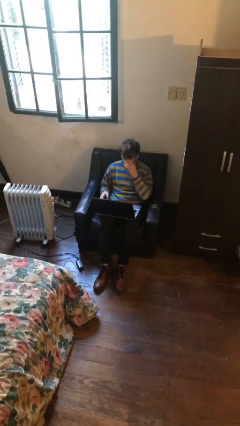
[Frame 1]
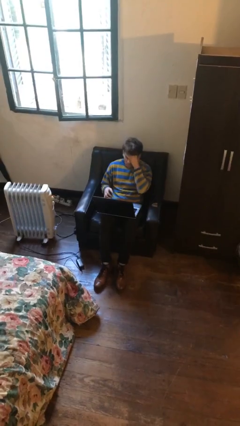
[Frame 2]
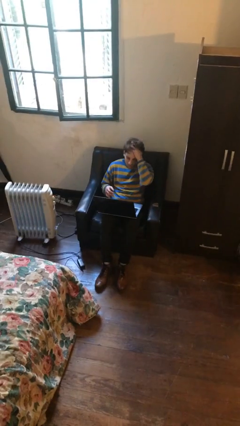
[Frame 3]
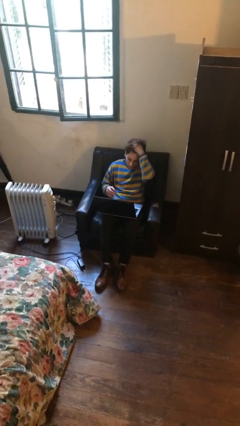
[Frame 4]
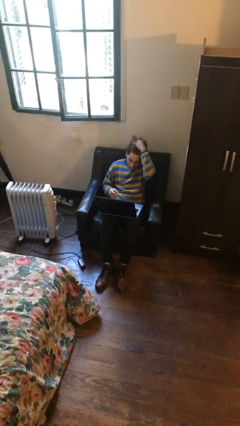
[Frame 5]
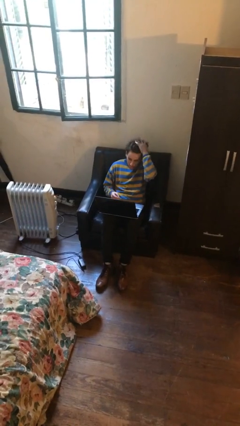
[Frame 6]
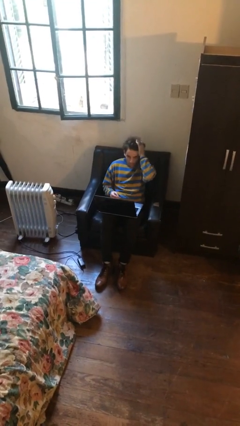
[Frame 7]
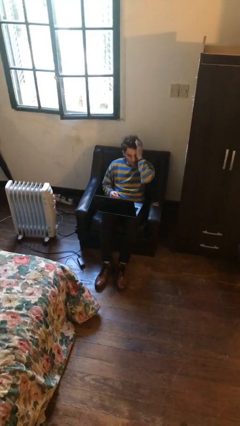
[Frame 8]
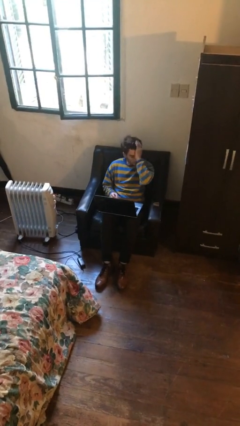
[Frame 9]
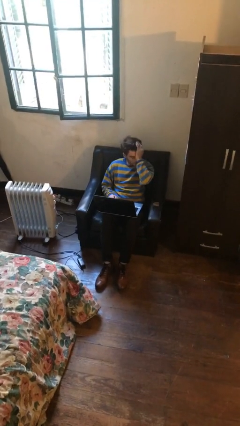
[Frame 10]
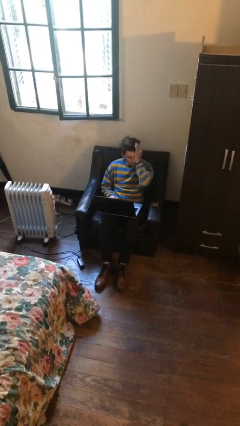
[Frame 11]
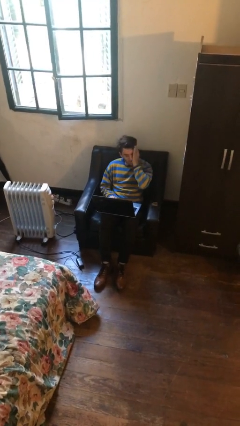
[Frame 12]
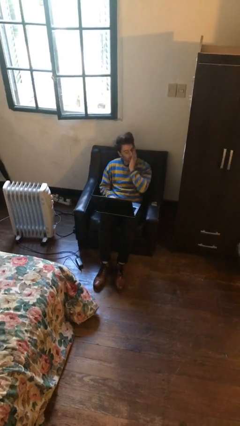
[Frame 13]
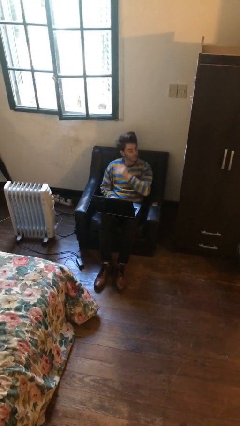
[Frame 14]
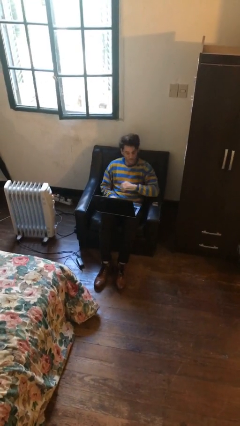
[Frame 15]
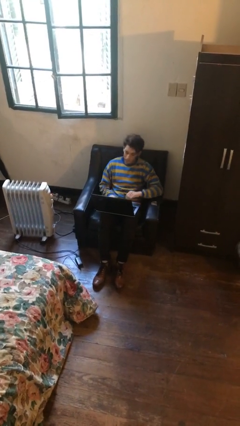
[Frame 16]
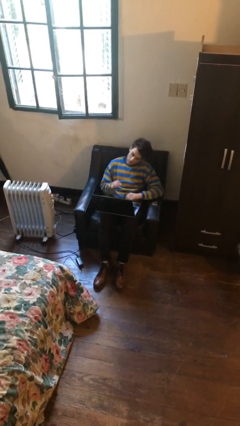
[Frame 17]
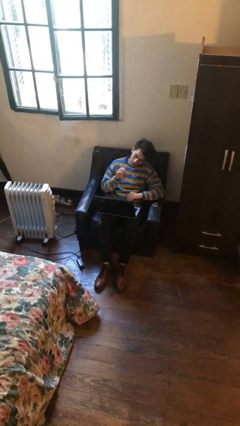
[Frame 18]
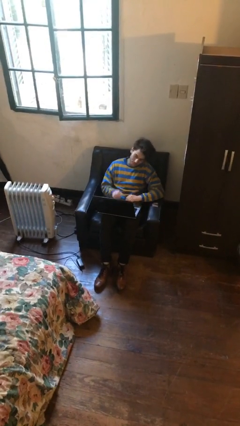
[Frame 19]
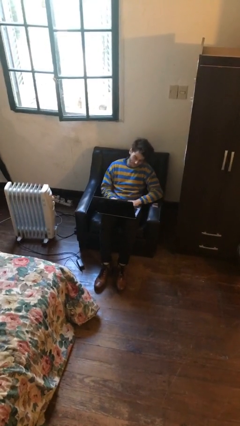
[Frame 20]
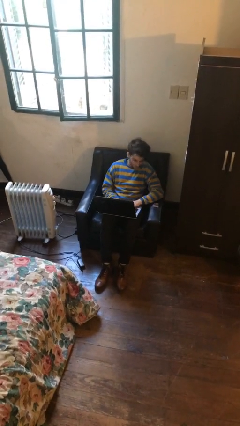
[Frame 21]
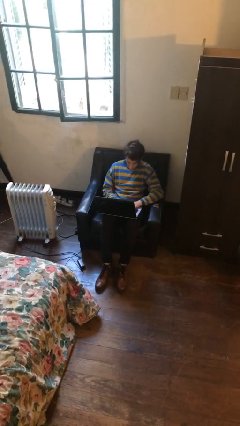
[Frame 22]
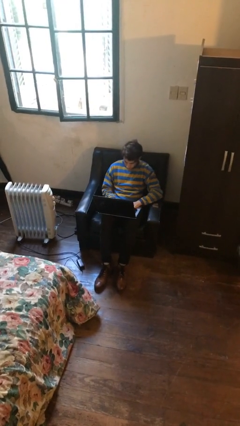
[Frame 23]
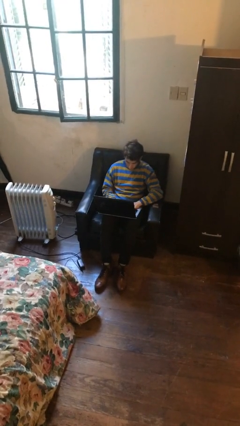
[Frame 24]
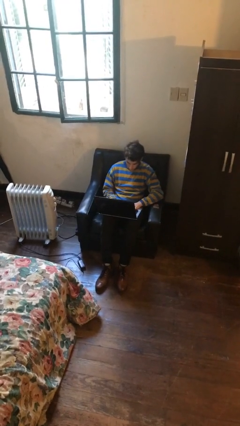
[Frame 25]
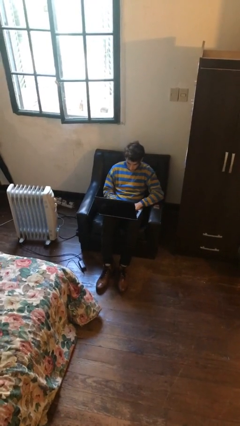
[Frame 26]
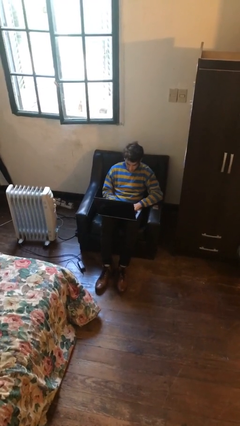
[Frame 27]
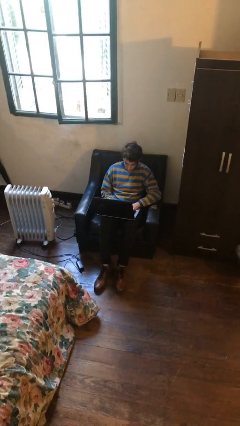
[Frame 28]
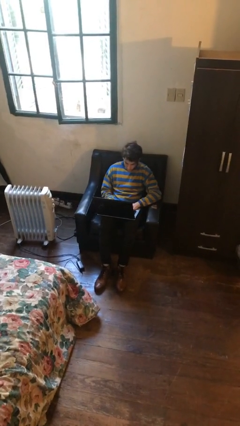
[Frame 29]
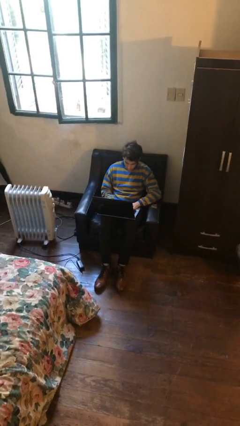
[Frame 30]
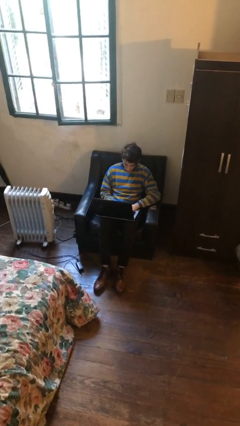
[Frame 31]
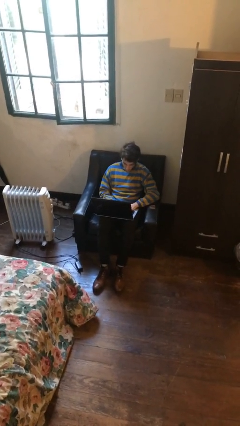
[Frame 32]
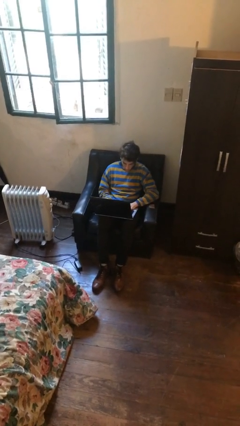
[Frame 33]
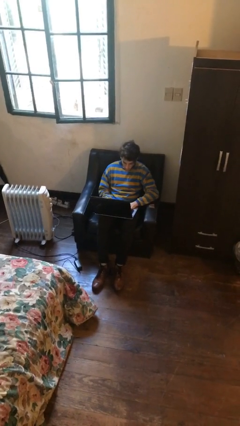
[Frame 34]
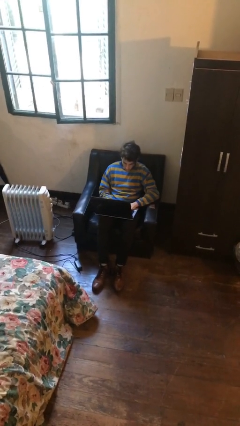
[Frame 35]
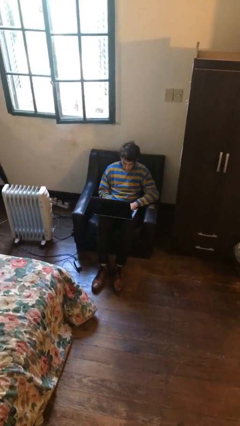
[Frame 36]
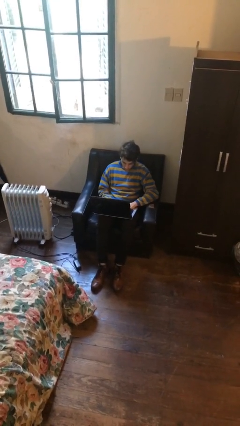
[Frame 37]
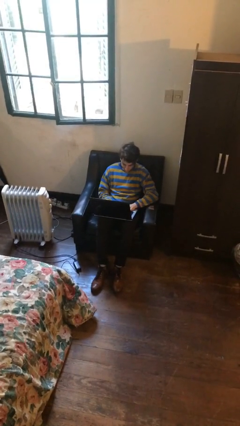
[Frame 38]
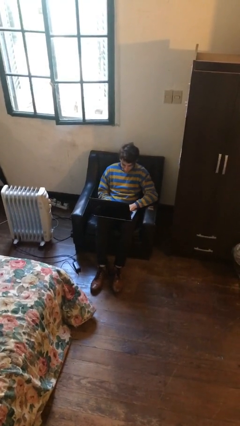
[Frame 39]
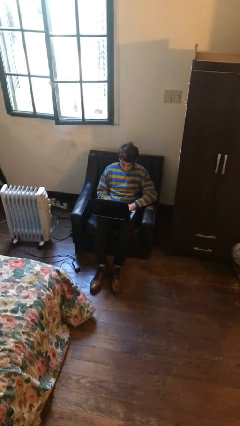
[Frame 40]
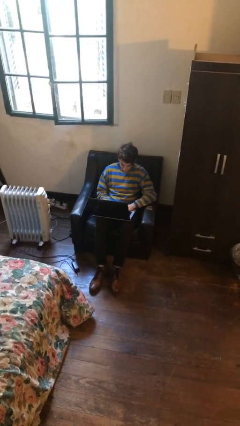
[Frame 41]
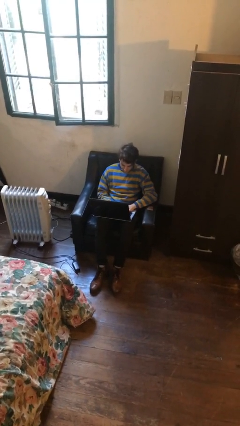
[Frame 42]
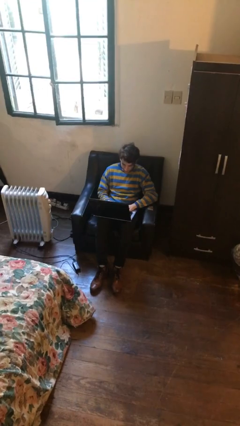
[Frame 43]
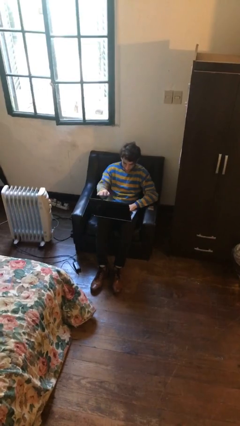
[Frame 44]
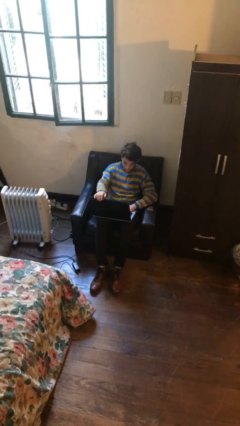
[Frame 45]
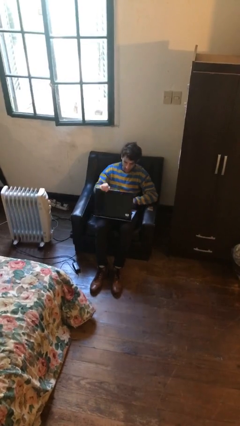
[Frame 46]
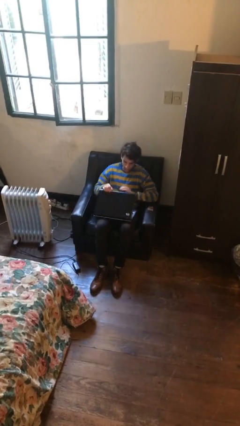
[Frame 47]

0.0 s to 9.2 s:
person interacts with laptop

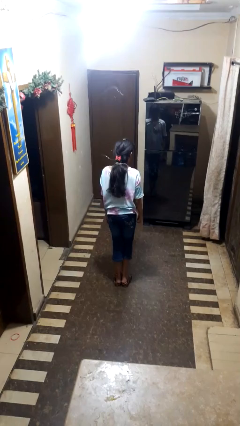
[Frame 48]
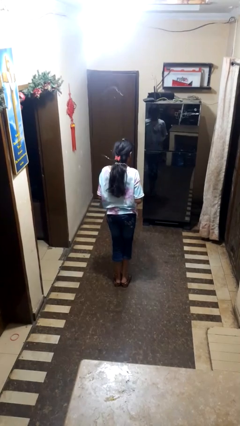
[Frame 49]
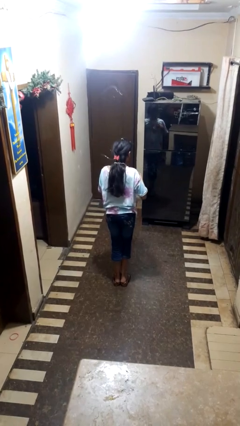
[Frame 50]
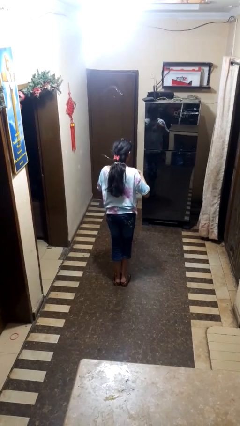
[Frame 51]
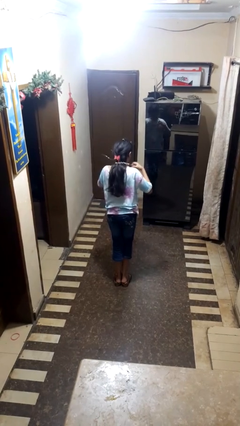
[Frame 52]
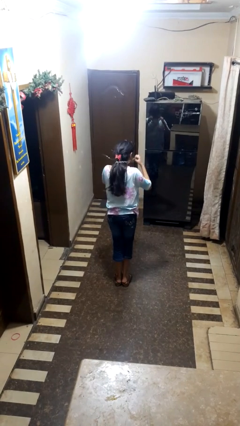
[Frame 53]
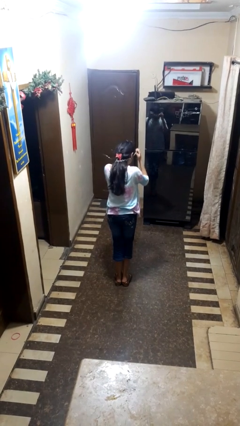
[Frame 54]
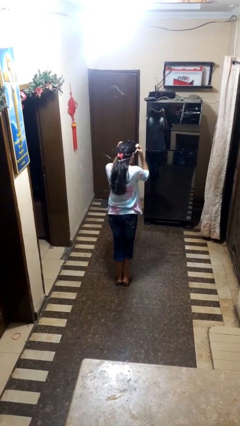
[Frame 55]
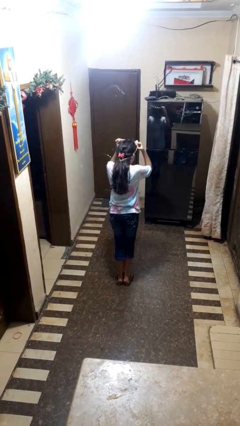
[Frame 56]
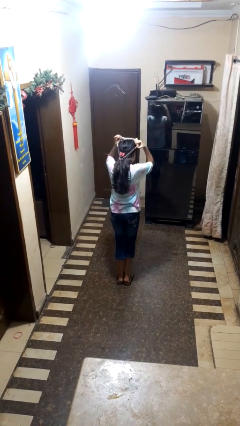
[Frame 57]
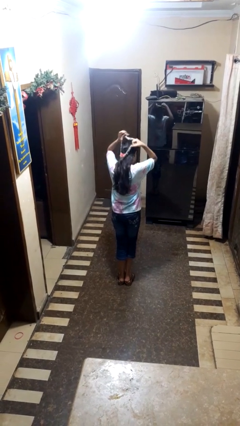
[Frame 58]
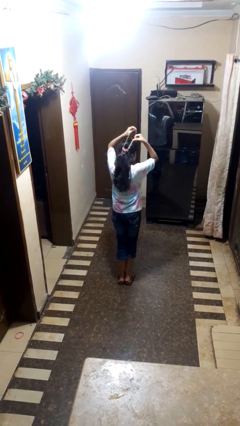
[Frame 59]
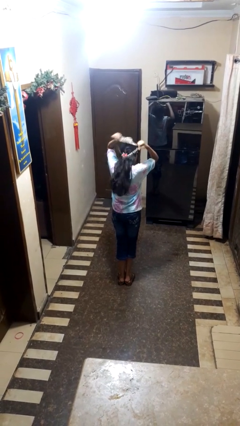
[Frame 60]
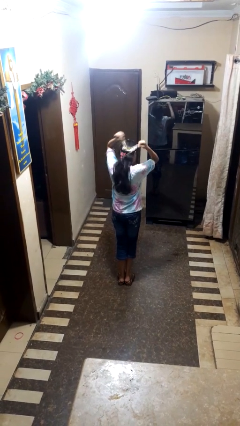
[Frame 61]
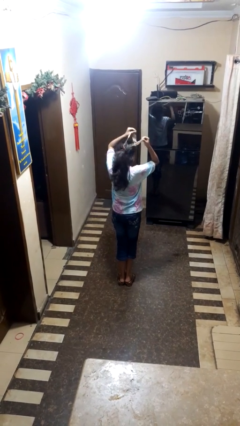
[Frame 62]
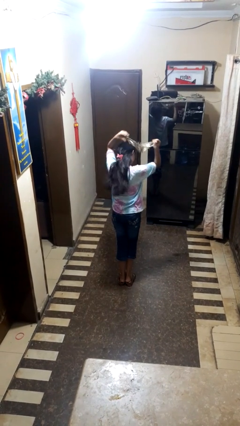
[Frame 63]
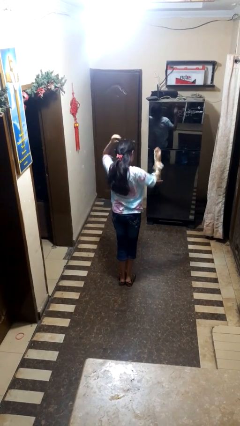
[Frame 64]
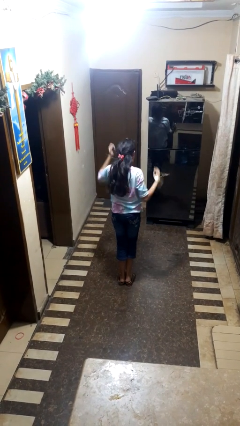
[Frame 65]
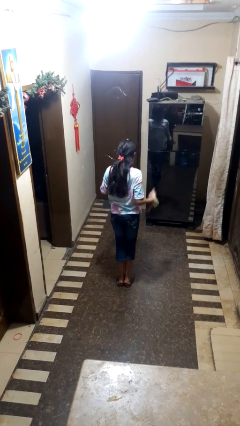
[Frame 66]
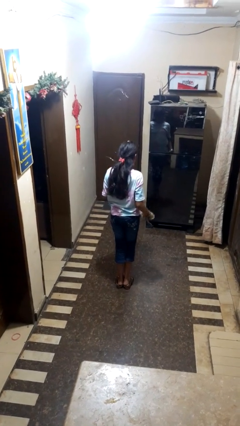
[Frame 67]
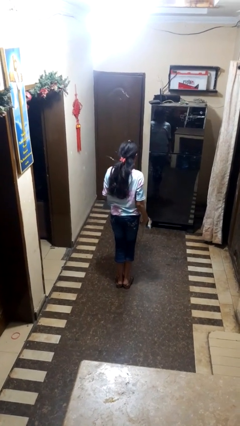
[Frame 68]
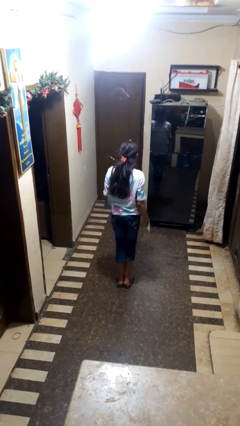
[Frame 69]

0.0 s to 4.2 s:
person takes off necklace

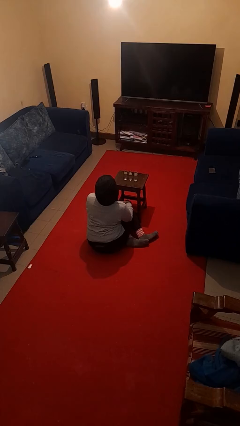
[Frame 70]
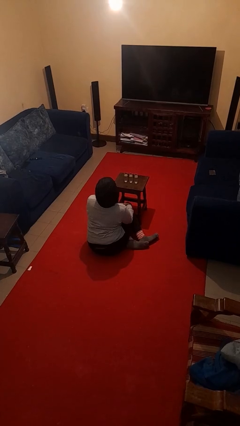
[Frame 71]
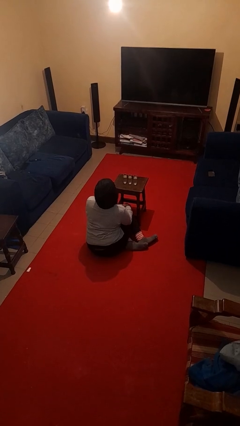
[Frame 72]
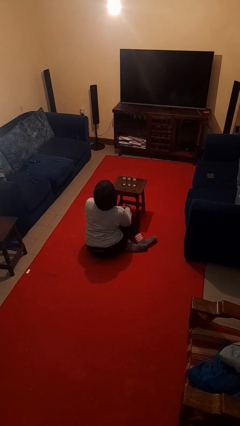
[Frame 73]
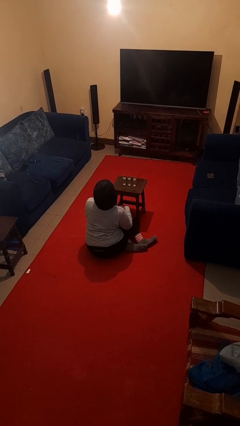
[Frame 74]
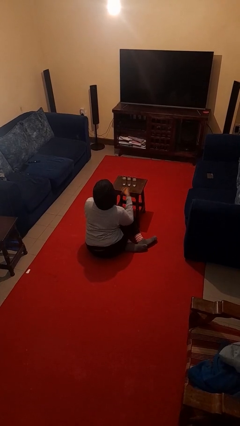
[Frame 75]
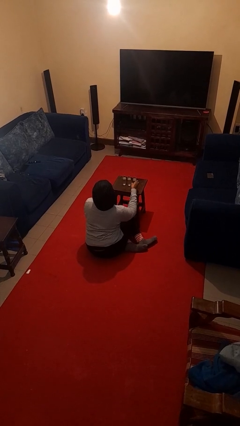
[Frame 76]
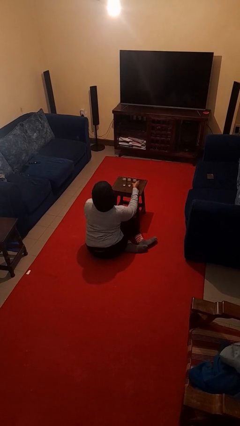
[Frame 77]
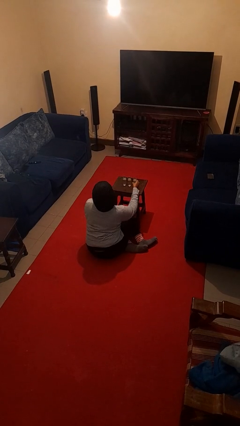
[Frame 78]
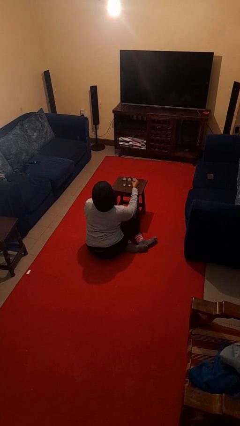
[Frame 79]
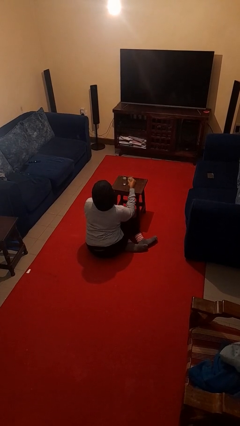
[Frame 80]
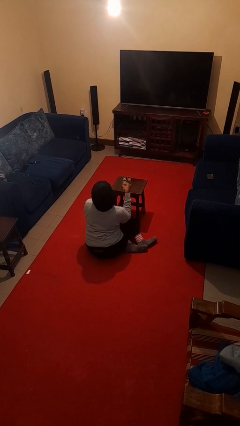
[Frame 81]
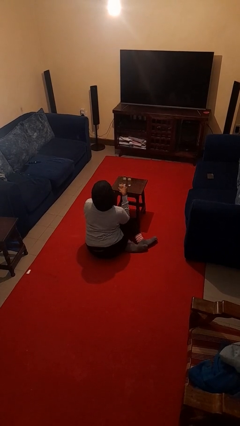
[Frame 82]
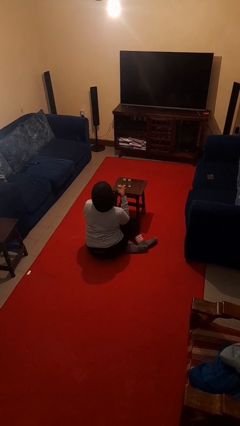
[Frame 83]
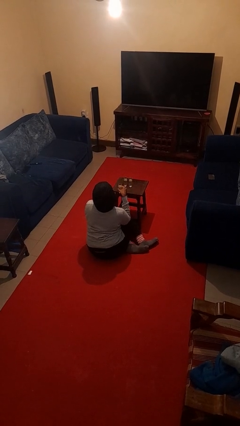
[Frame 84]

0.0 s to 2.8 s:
person picks up object from table

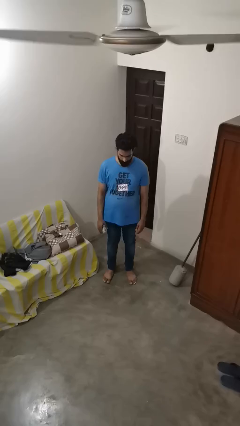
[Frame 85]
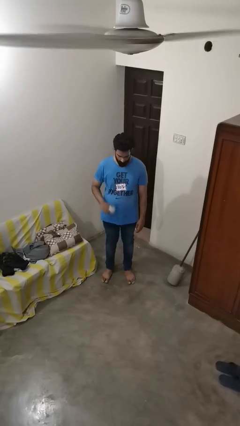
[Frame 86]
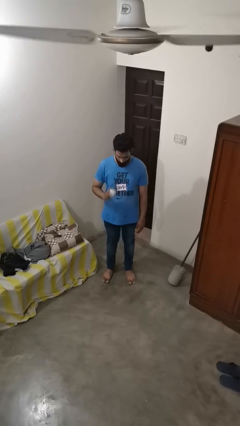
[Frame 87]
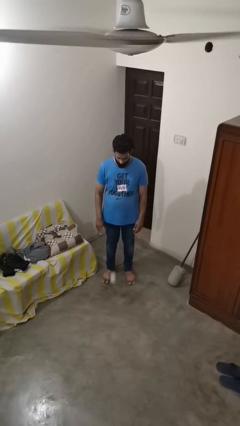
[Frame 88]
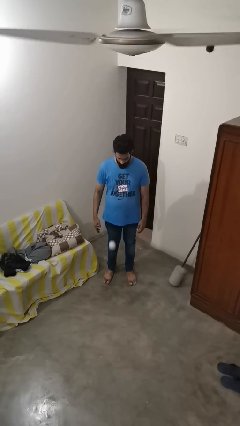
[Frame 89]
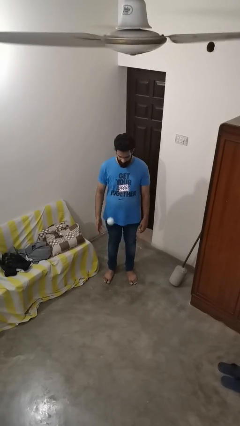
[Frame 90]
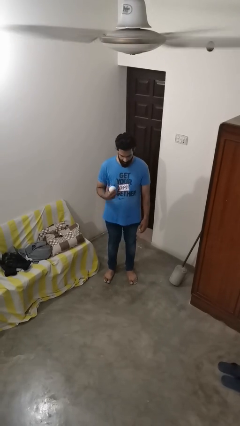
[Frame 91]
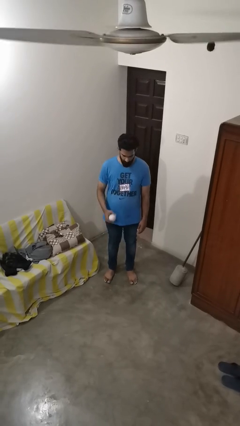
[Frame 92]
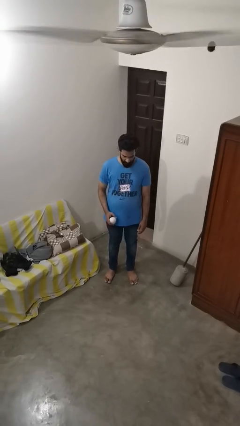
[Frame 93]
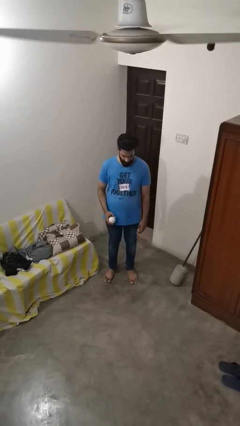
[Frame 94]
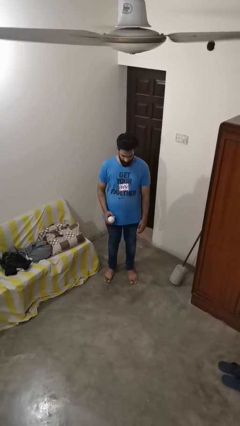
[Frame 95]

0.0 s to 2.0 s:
person bounces ball on floor
